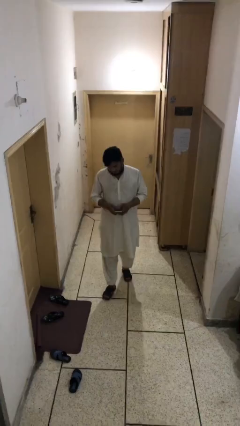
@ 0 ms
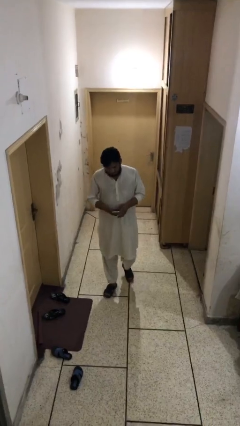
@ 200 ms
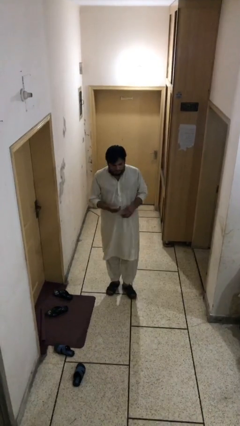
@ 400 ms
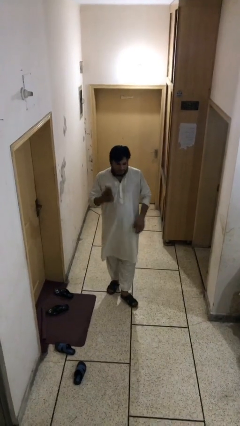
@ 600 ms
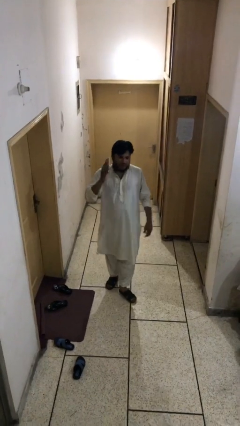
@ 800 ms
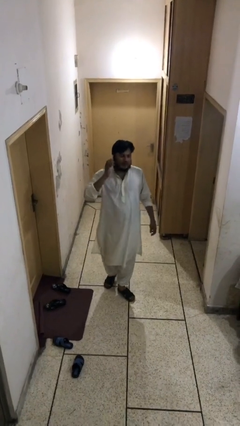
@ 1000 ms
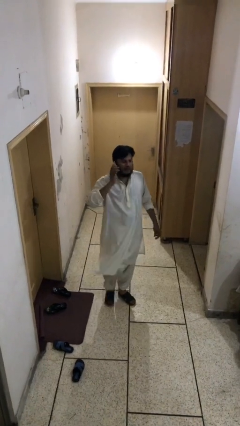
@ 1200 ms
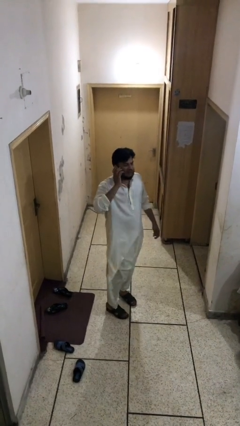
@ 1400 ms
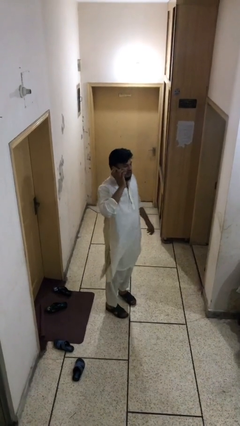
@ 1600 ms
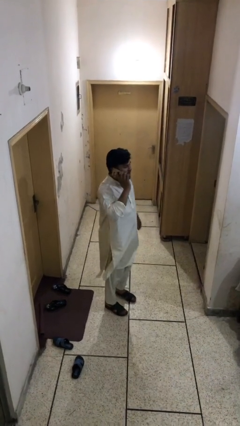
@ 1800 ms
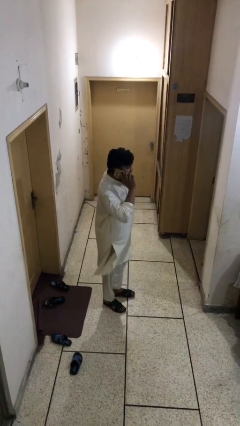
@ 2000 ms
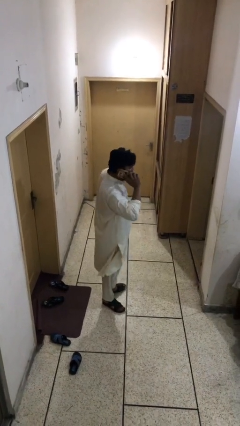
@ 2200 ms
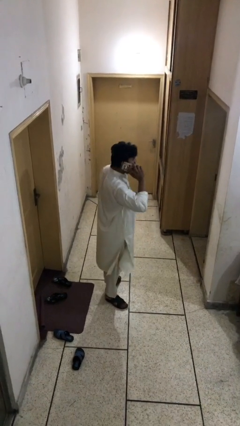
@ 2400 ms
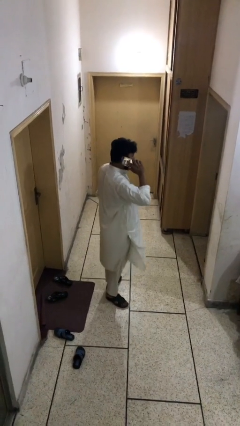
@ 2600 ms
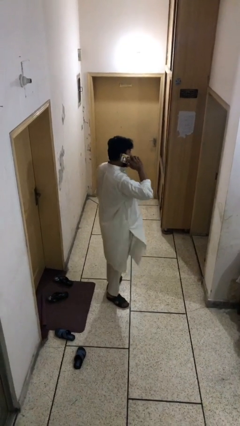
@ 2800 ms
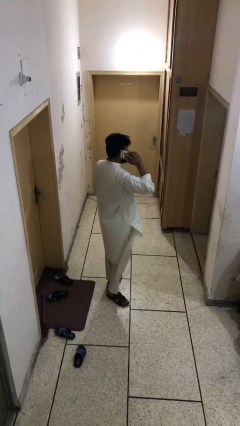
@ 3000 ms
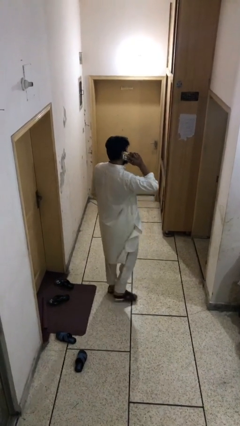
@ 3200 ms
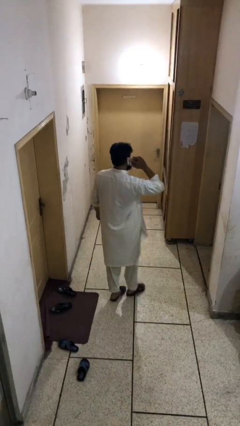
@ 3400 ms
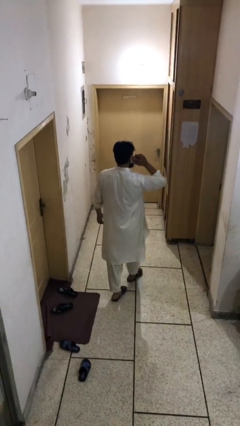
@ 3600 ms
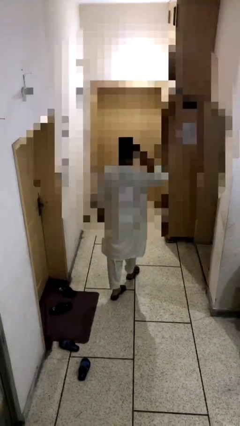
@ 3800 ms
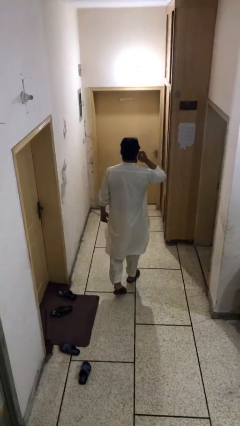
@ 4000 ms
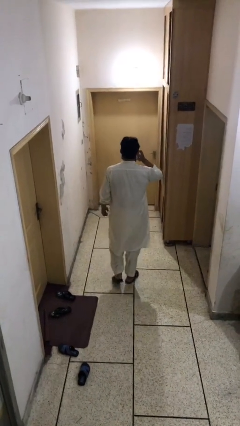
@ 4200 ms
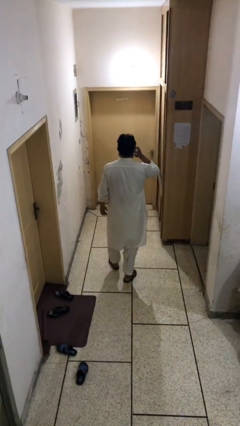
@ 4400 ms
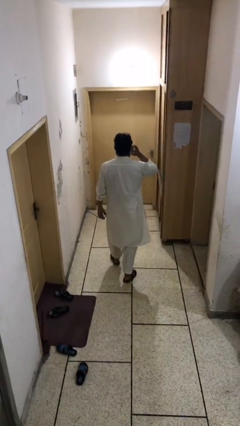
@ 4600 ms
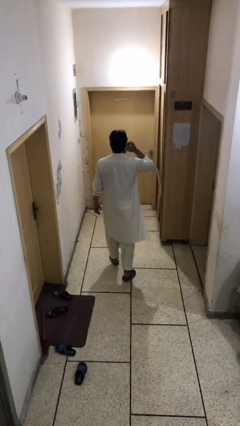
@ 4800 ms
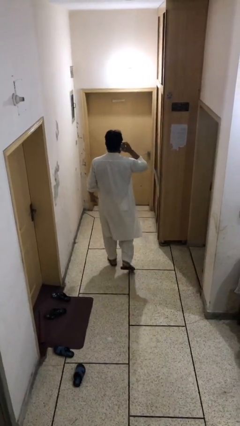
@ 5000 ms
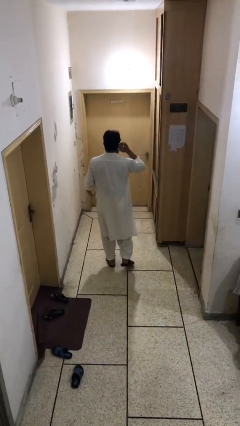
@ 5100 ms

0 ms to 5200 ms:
person talks on phone

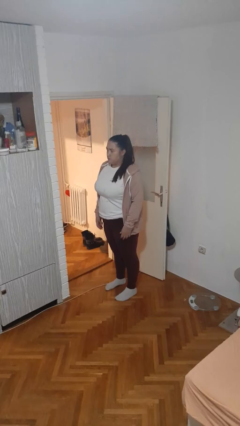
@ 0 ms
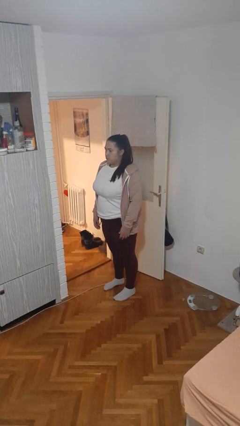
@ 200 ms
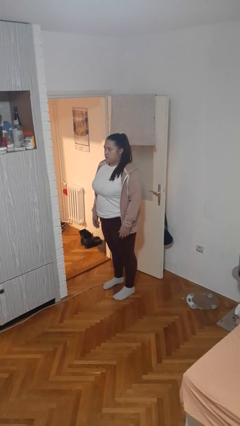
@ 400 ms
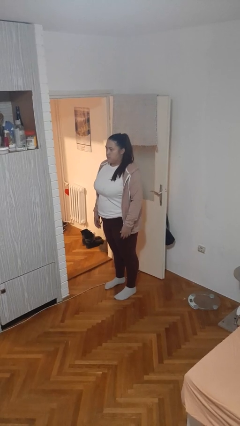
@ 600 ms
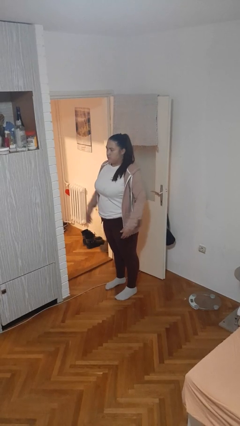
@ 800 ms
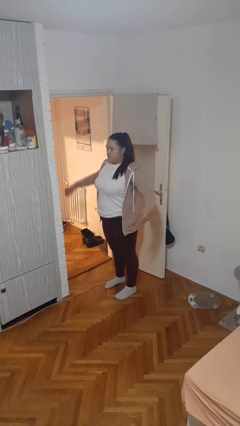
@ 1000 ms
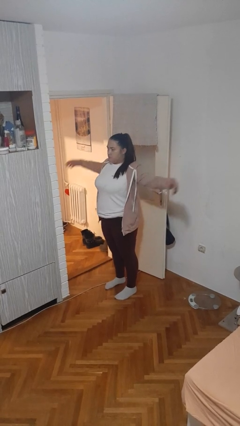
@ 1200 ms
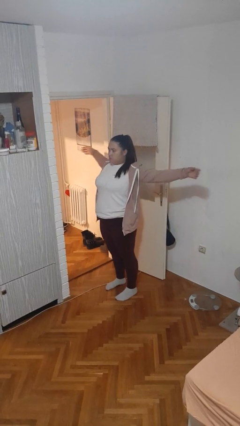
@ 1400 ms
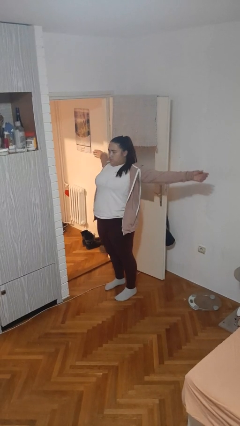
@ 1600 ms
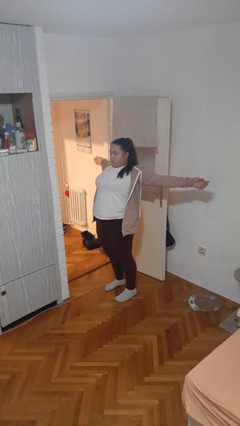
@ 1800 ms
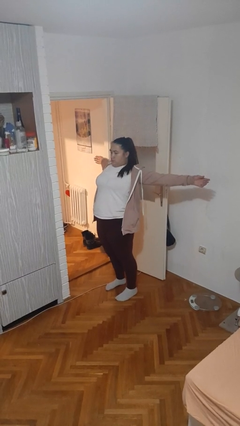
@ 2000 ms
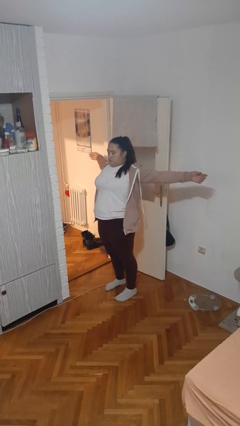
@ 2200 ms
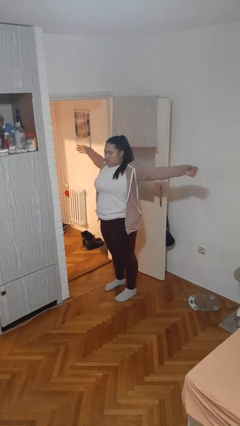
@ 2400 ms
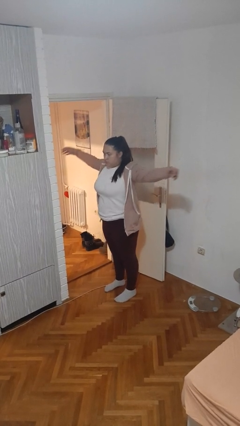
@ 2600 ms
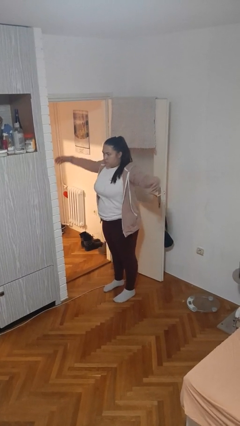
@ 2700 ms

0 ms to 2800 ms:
person stretches arms to side

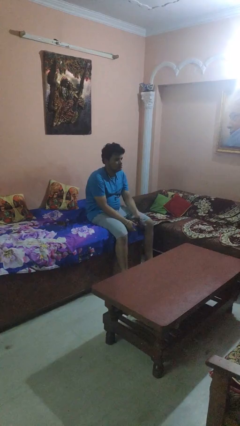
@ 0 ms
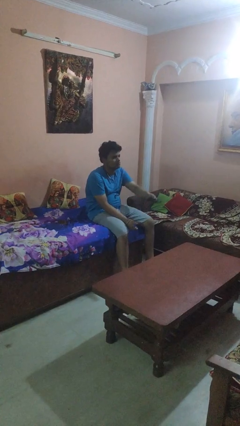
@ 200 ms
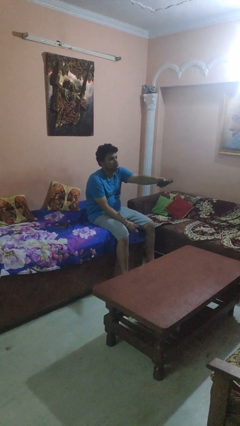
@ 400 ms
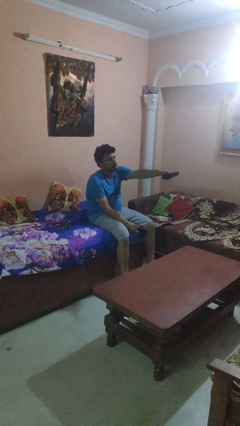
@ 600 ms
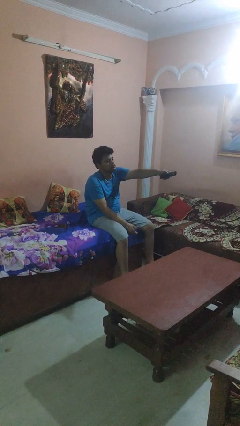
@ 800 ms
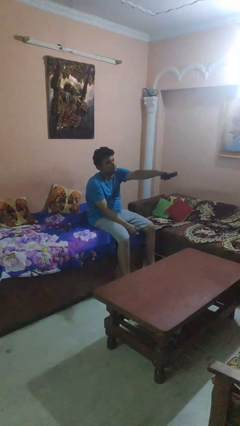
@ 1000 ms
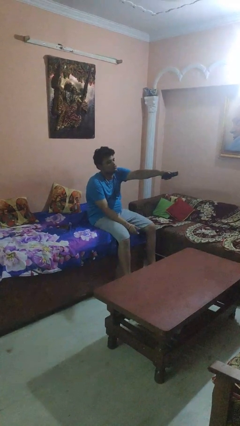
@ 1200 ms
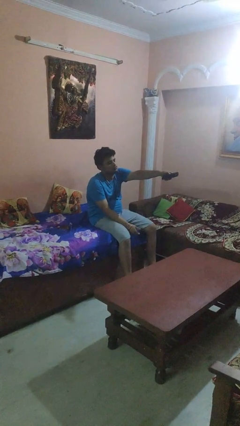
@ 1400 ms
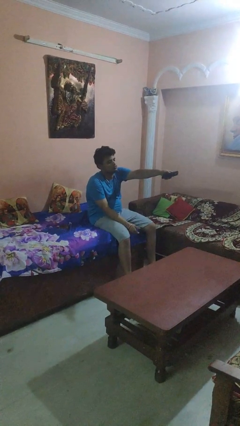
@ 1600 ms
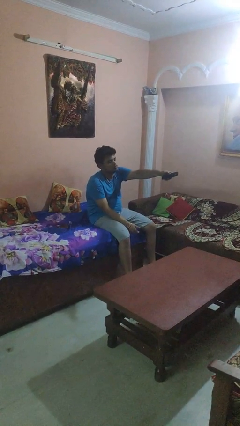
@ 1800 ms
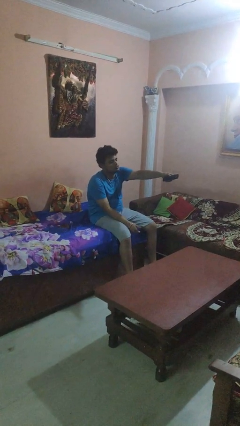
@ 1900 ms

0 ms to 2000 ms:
person uses television remote

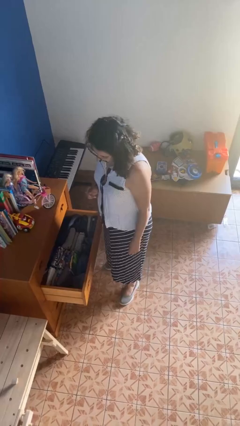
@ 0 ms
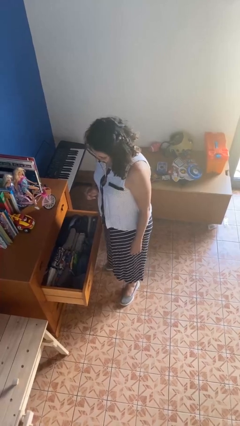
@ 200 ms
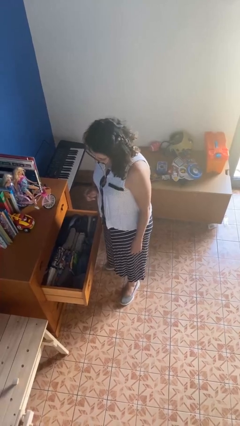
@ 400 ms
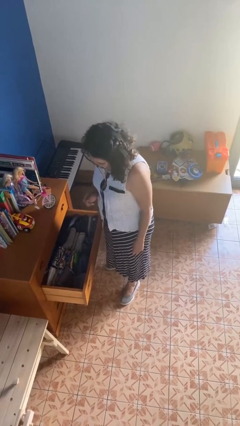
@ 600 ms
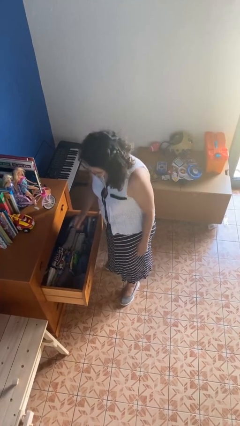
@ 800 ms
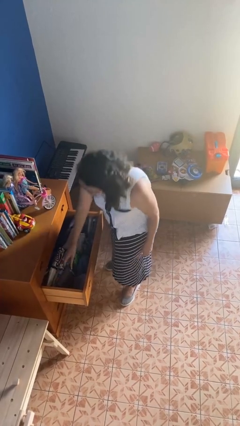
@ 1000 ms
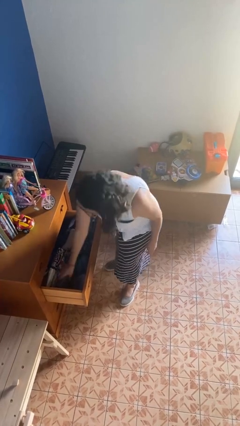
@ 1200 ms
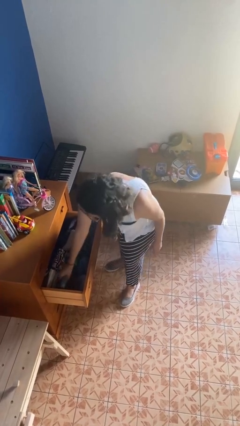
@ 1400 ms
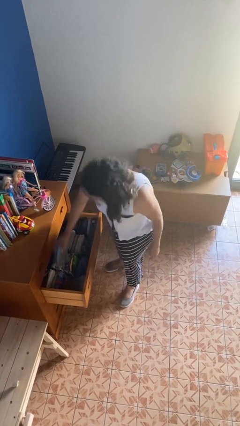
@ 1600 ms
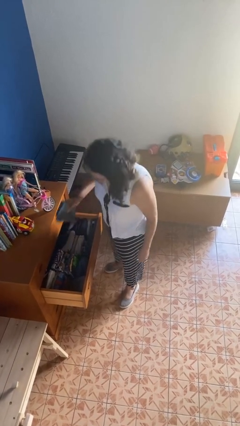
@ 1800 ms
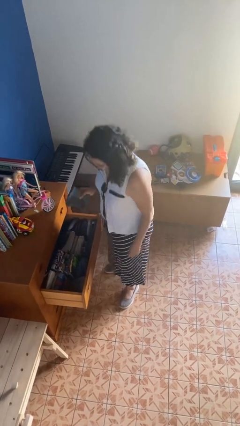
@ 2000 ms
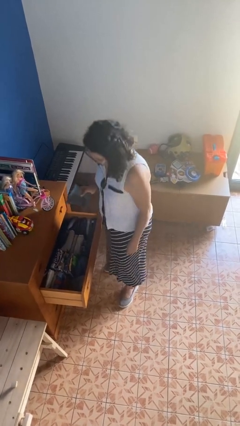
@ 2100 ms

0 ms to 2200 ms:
person takes clothes from dresser

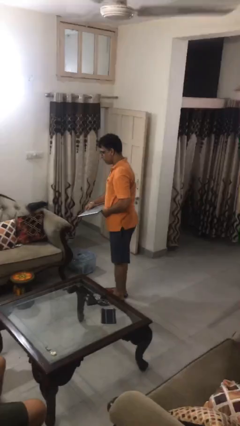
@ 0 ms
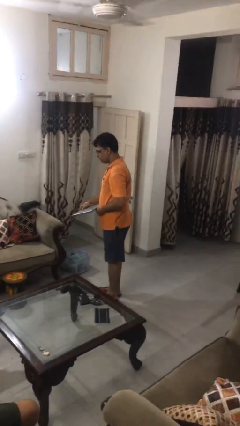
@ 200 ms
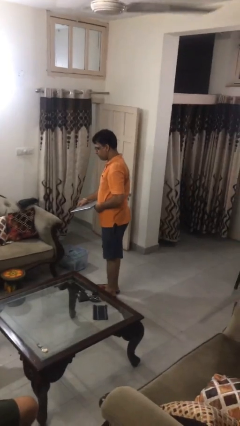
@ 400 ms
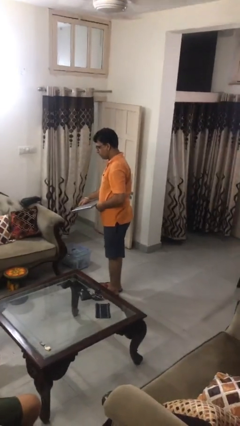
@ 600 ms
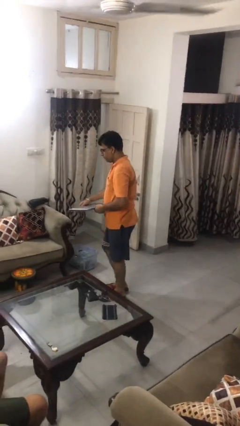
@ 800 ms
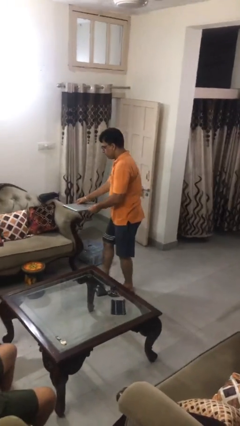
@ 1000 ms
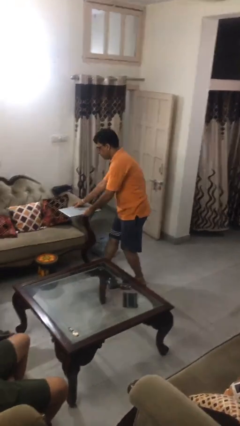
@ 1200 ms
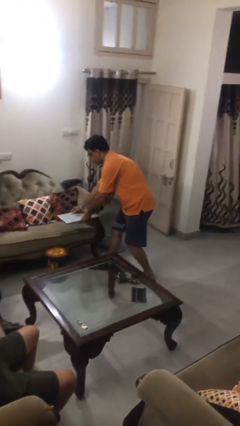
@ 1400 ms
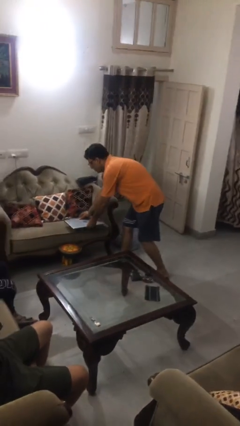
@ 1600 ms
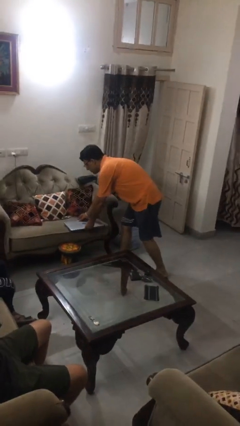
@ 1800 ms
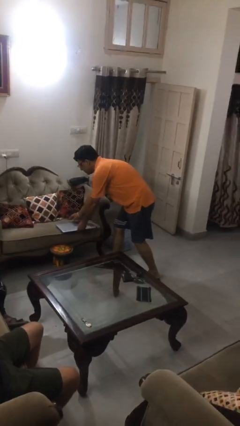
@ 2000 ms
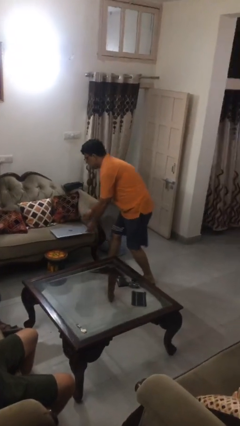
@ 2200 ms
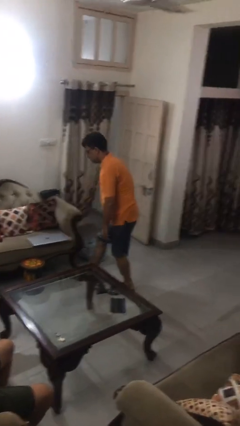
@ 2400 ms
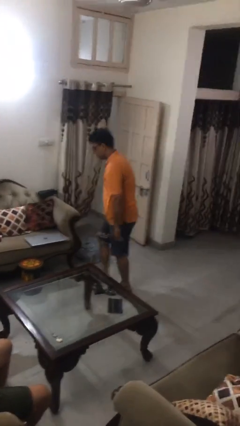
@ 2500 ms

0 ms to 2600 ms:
person puts down object on couch

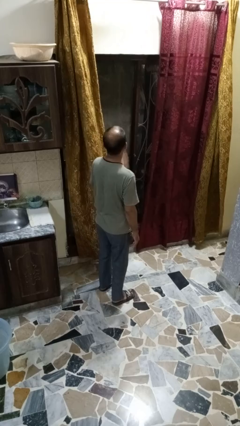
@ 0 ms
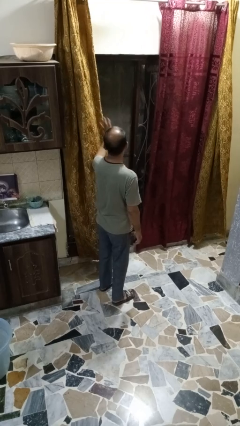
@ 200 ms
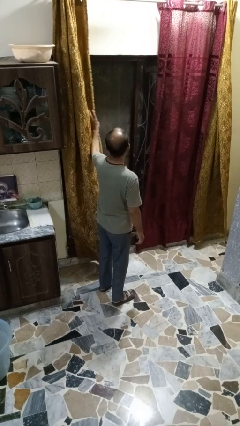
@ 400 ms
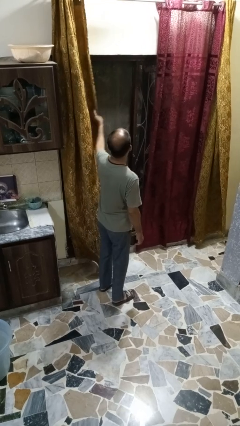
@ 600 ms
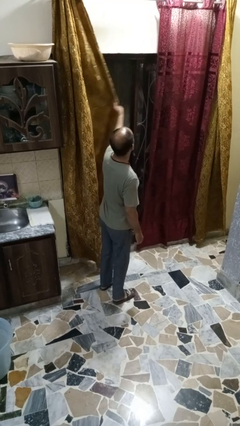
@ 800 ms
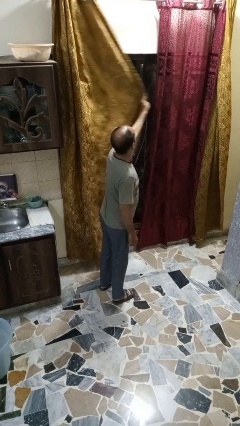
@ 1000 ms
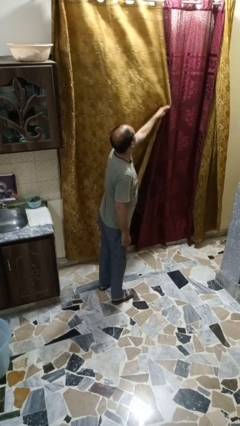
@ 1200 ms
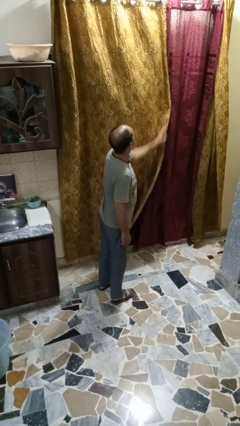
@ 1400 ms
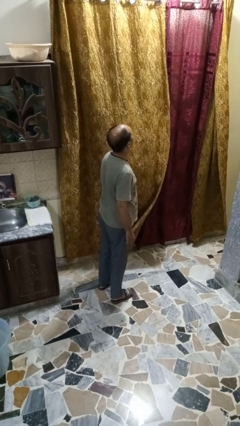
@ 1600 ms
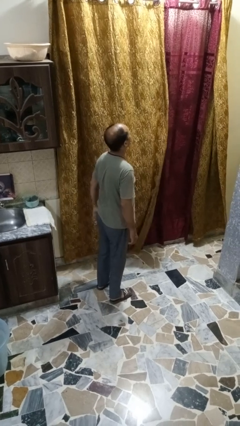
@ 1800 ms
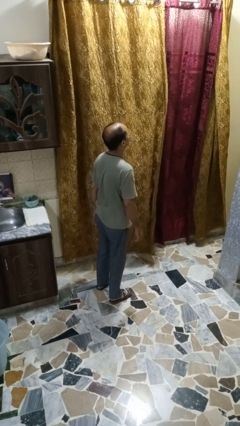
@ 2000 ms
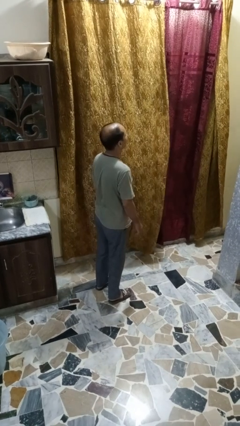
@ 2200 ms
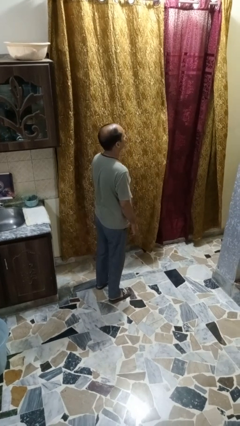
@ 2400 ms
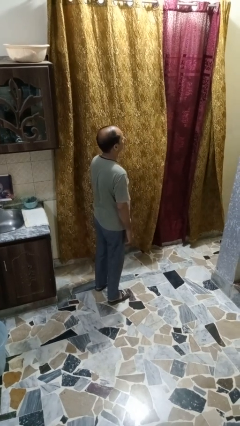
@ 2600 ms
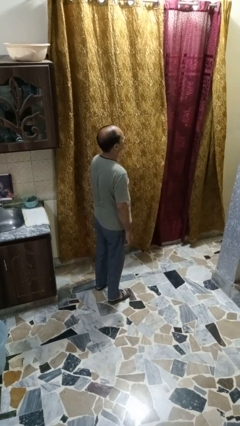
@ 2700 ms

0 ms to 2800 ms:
person closes curtains
